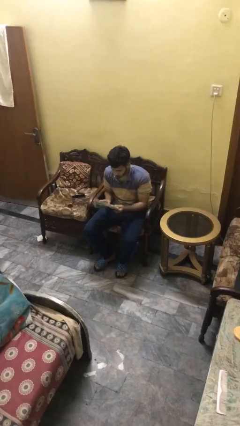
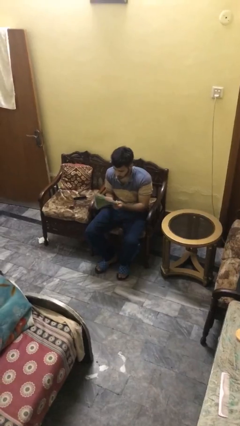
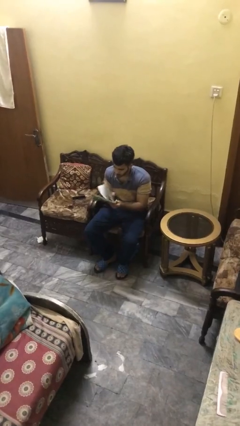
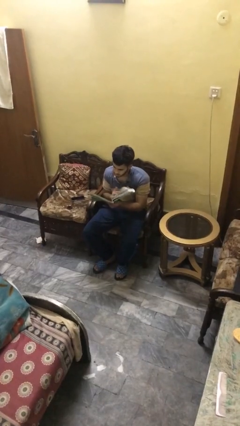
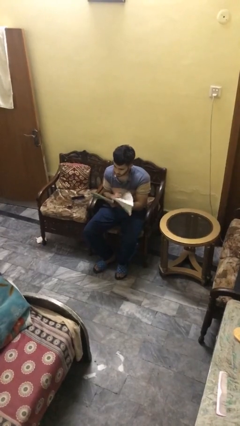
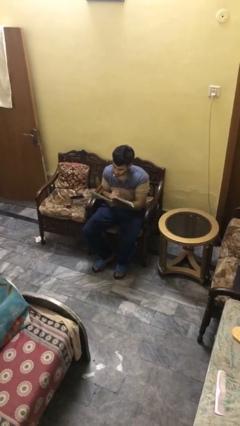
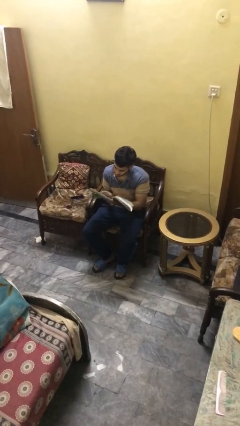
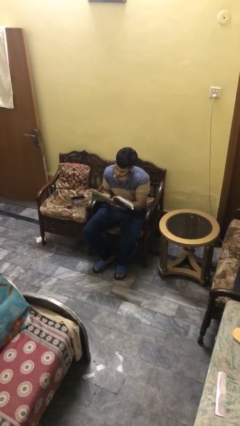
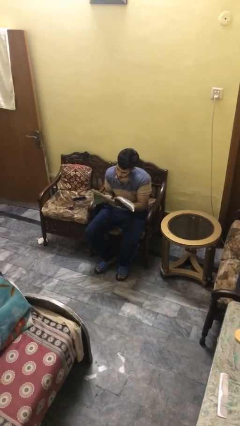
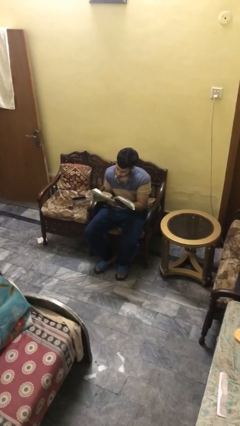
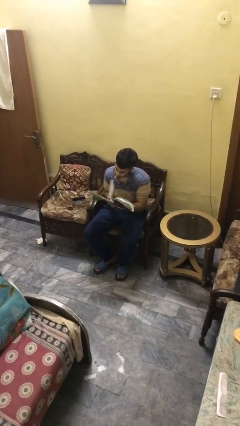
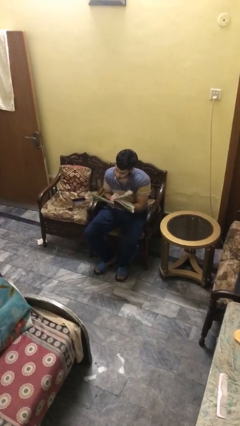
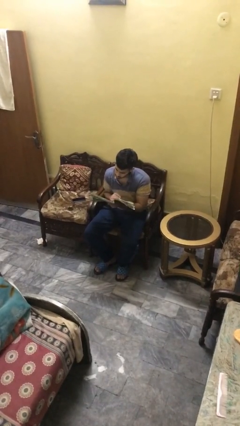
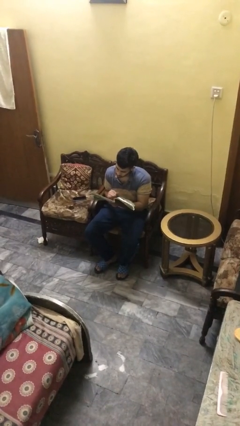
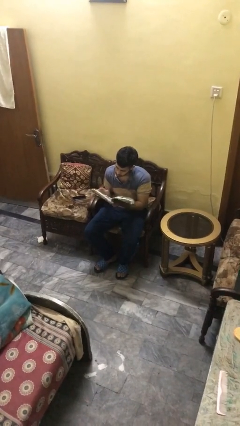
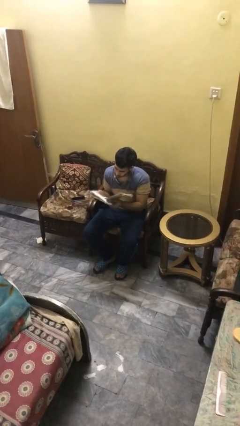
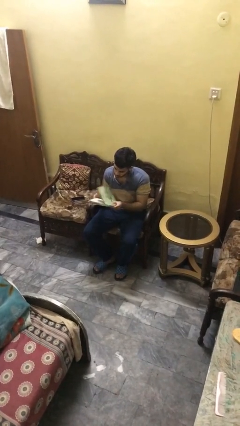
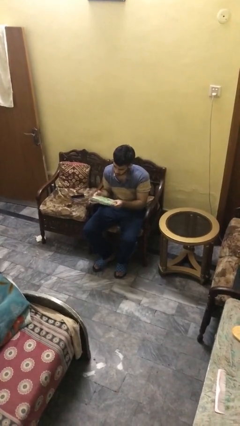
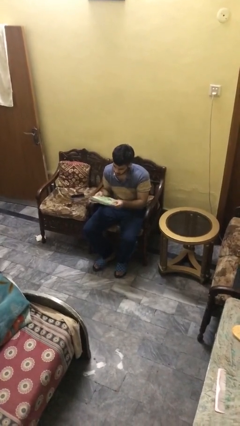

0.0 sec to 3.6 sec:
person reads document

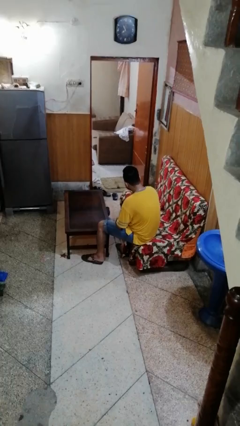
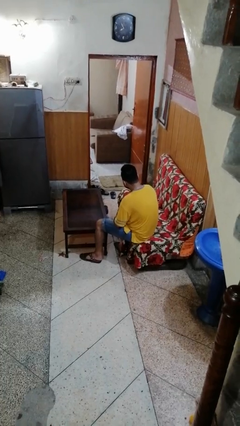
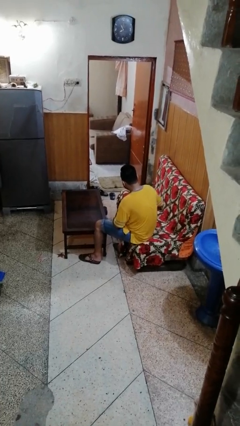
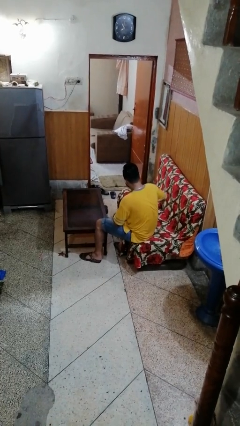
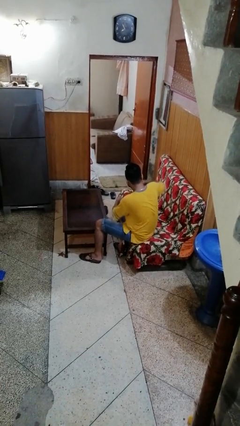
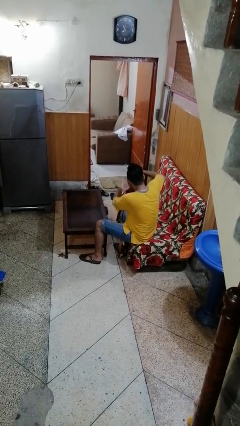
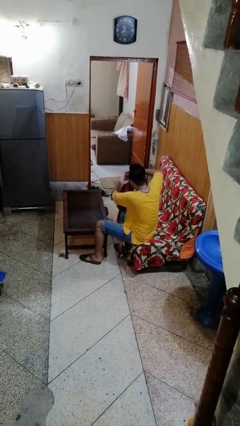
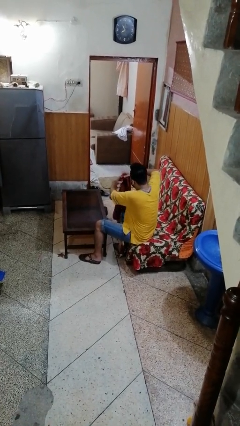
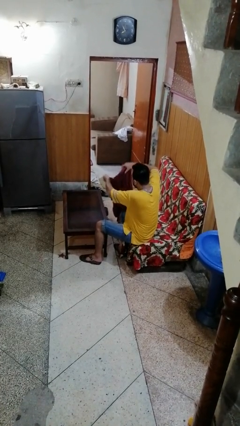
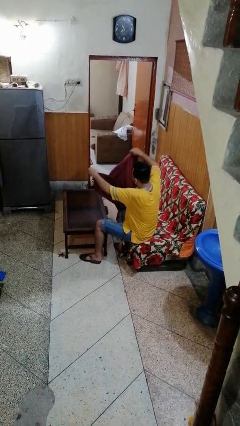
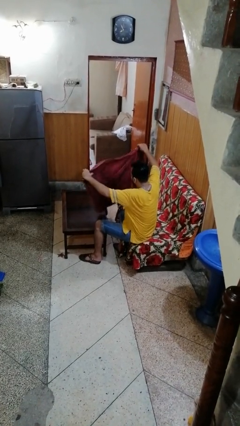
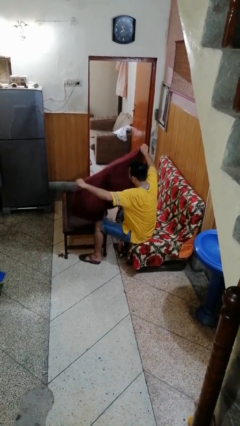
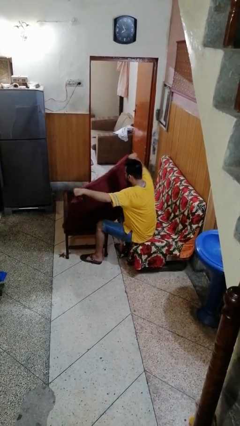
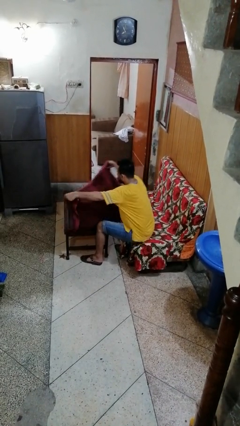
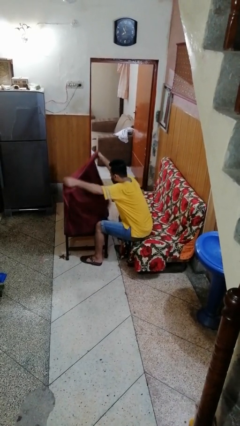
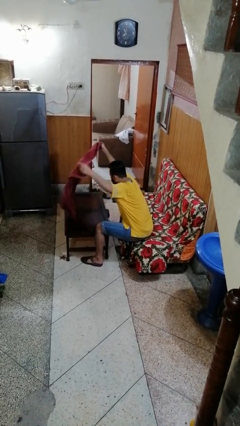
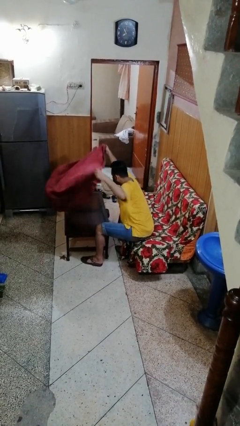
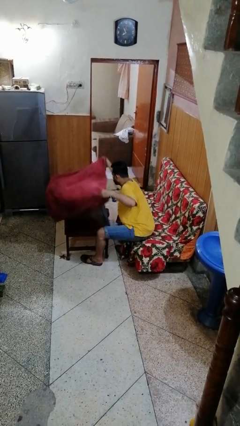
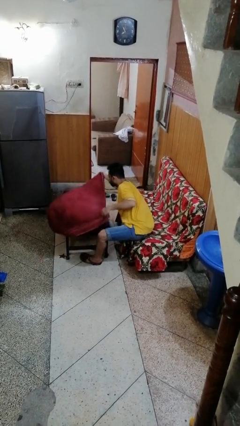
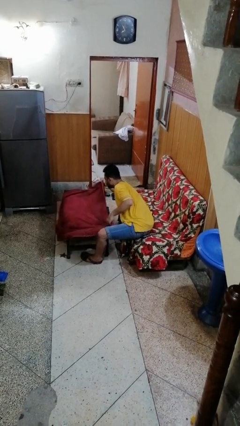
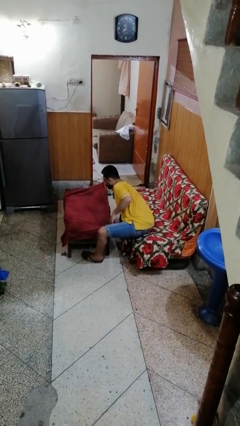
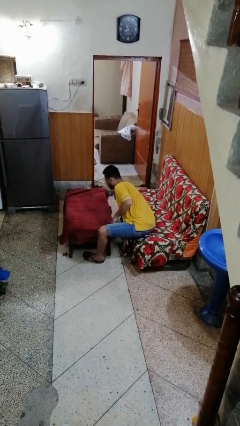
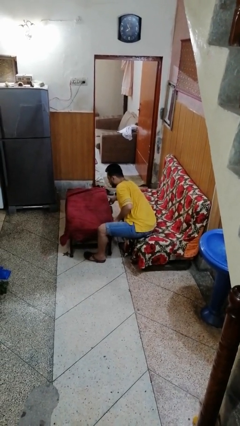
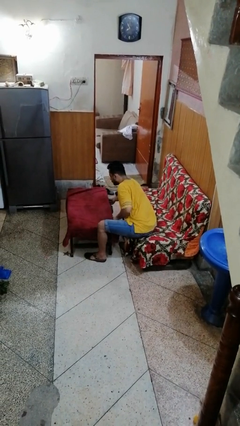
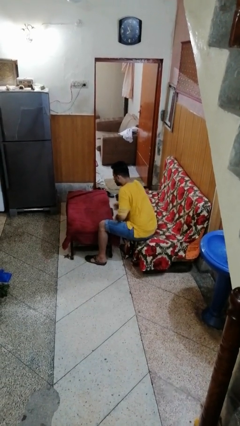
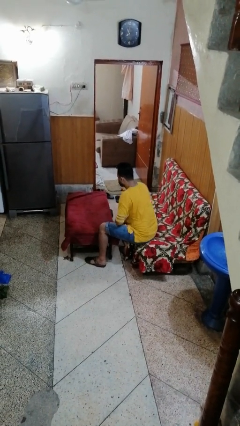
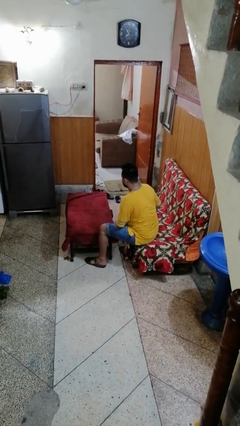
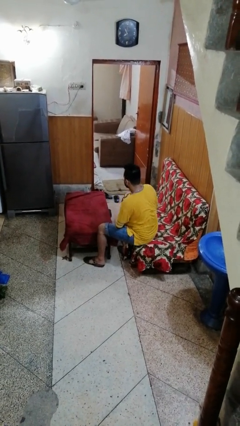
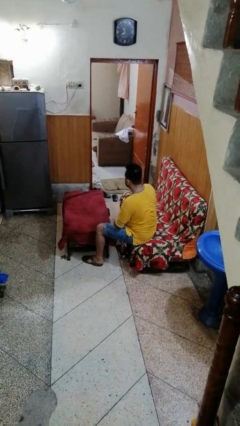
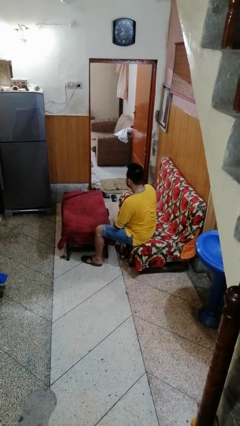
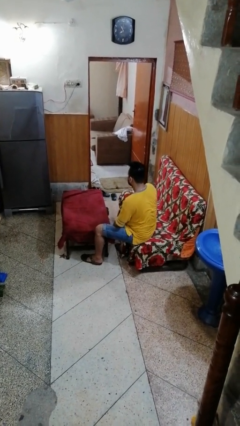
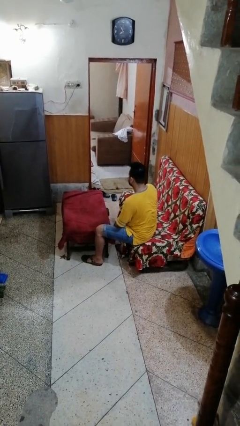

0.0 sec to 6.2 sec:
person spreads tablecloth

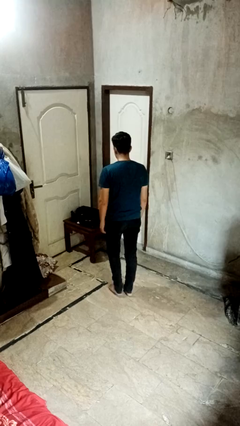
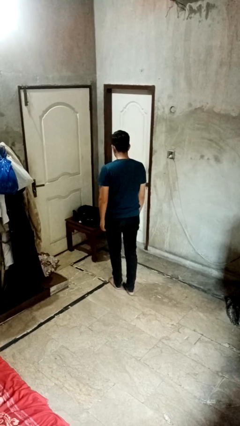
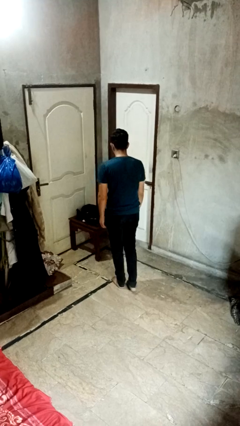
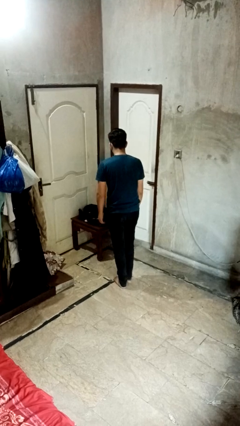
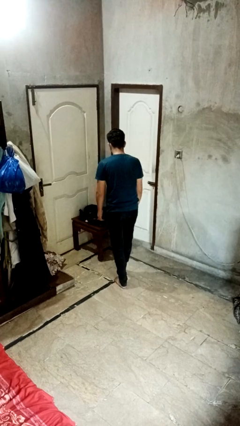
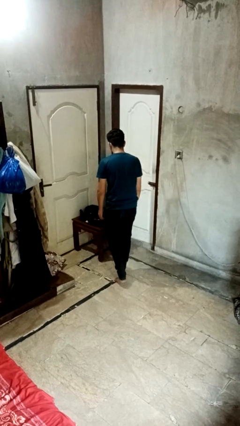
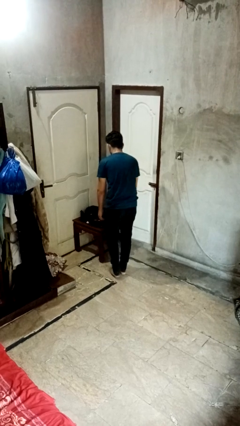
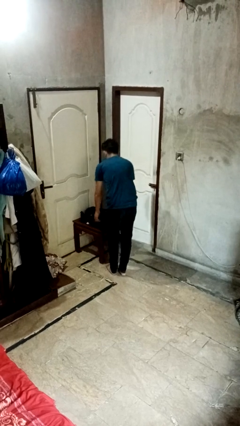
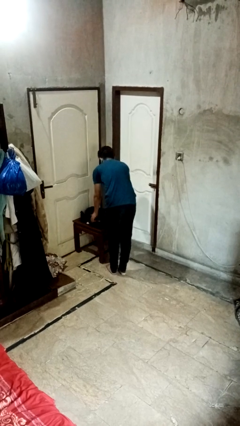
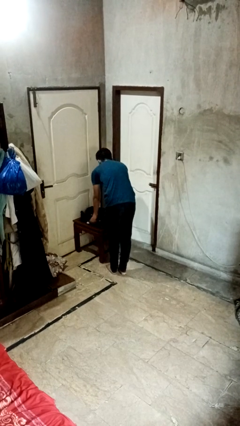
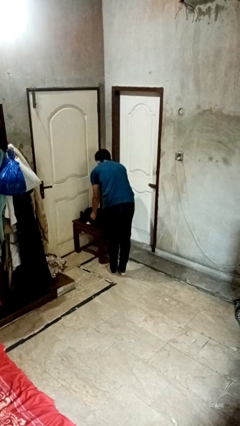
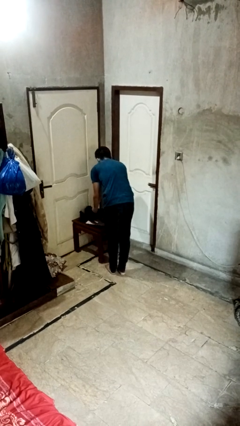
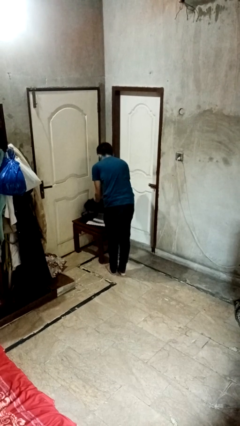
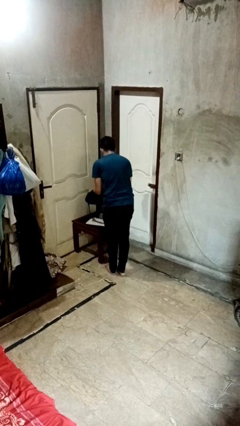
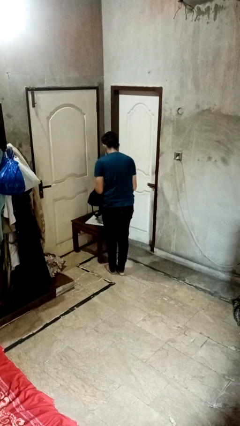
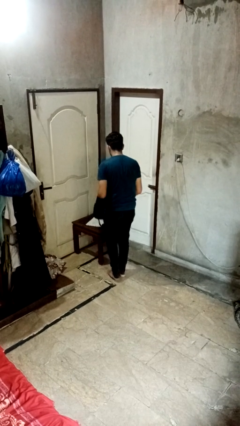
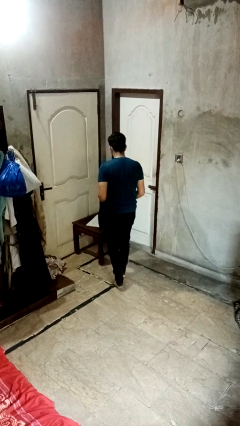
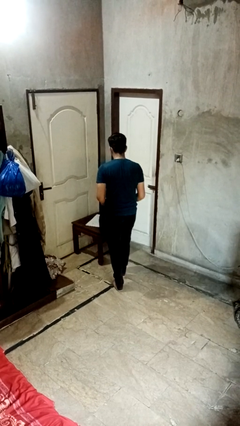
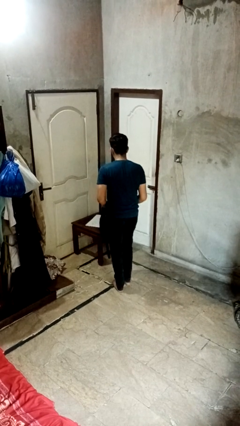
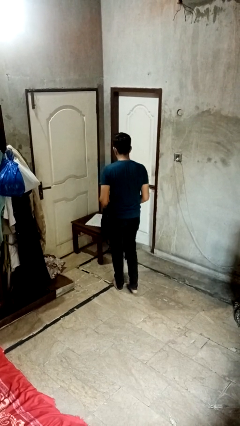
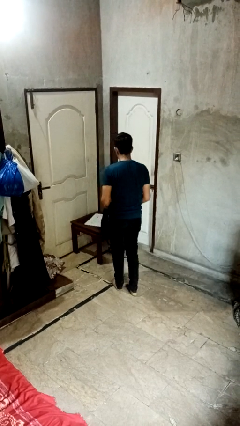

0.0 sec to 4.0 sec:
person picks up object from table

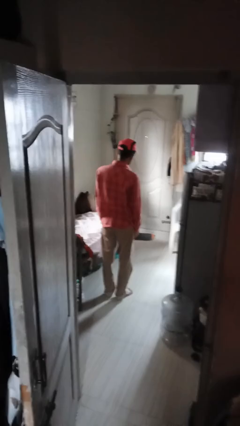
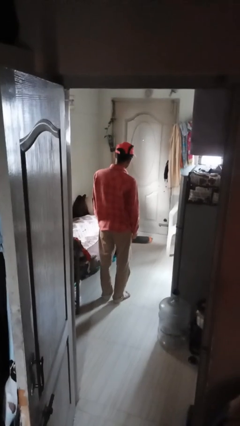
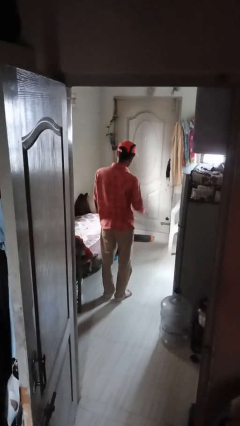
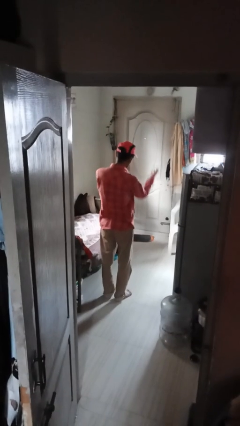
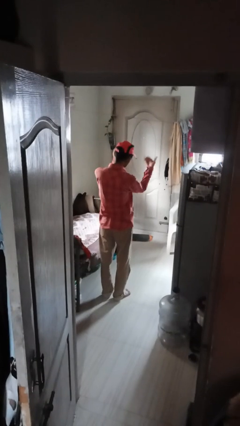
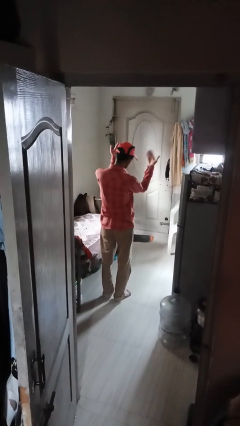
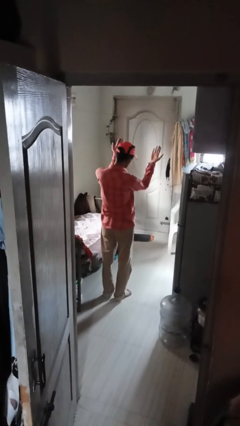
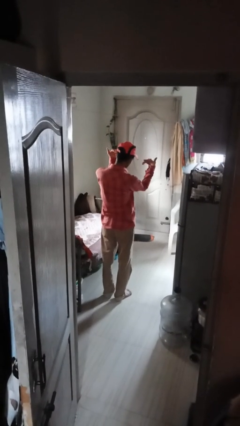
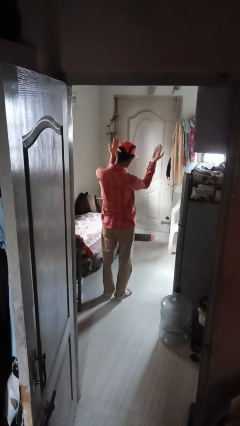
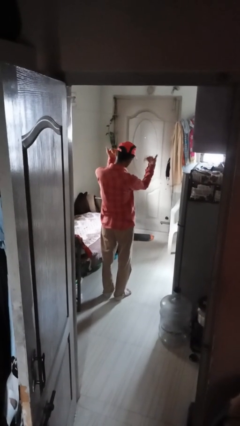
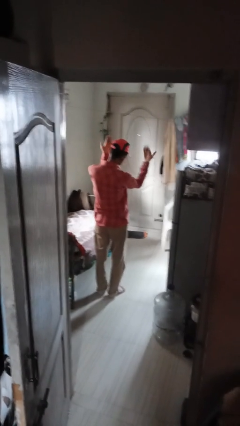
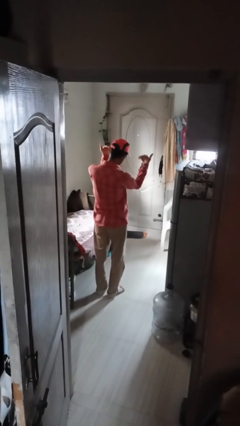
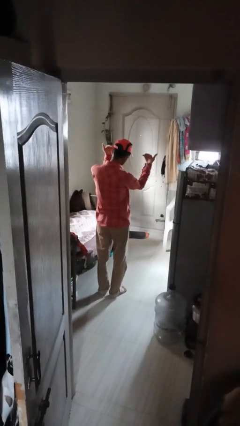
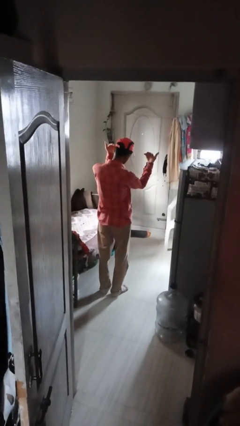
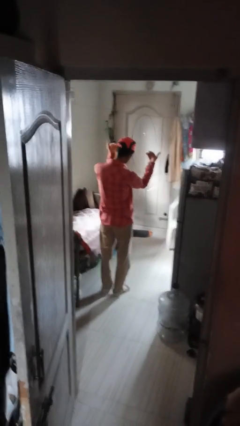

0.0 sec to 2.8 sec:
person gestures come here

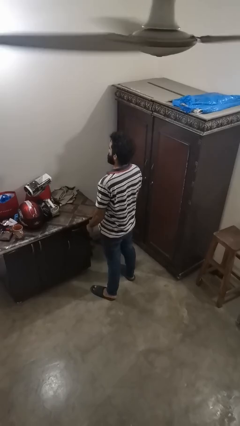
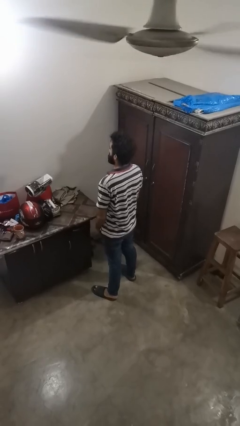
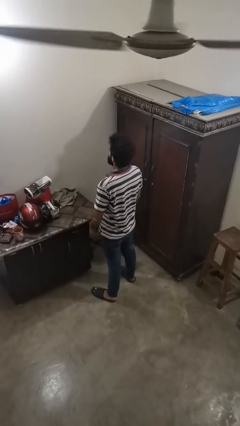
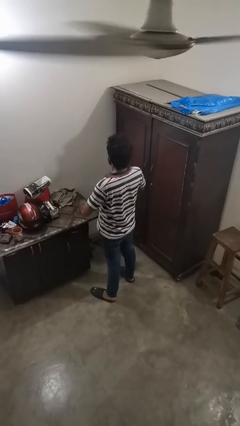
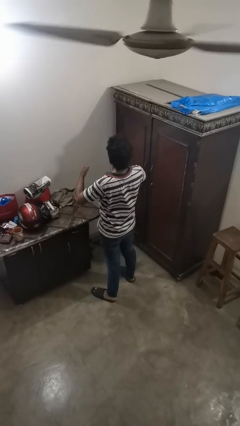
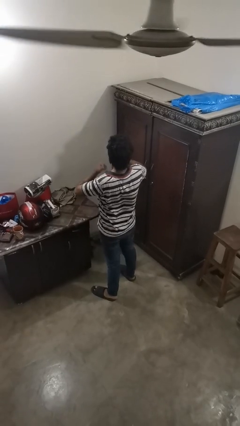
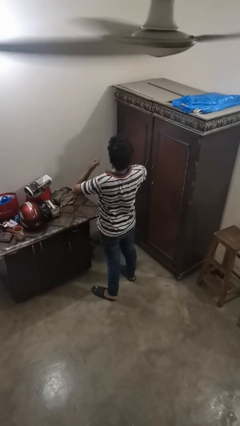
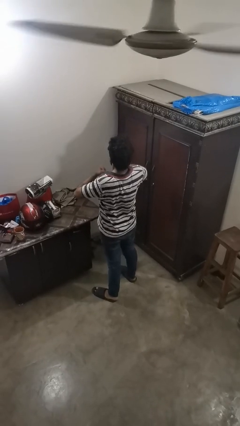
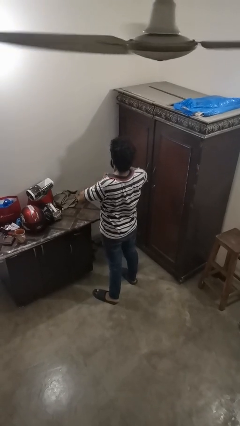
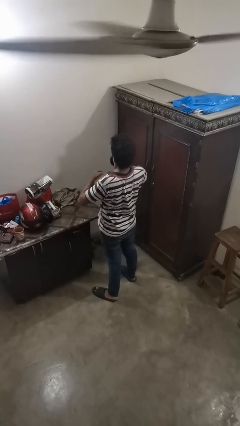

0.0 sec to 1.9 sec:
person drums on chest
